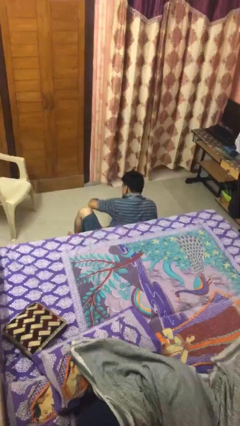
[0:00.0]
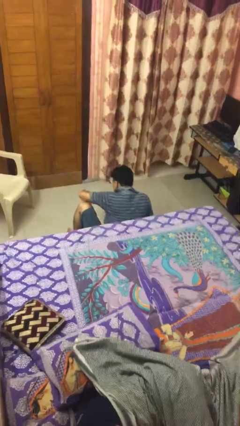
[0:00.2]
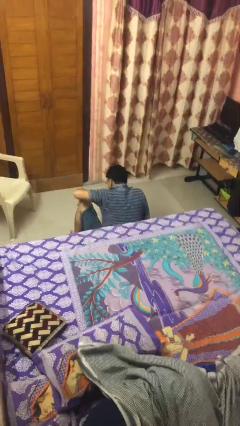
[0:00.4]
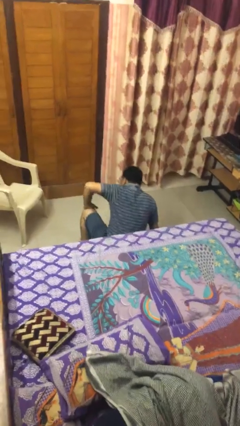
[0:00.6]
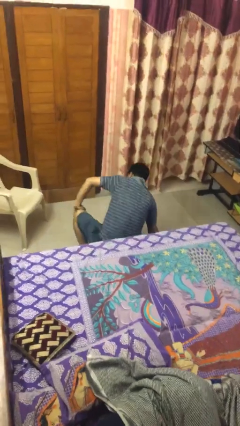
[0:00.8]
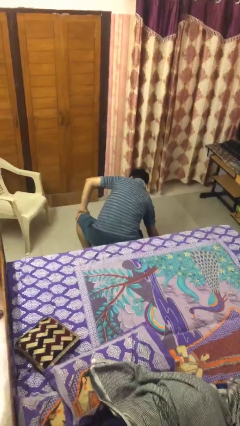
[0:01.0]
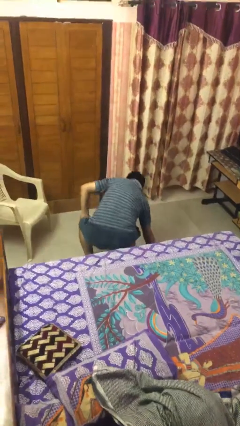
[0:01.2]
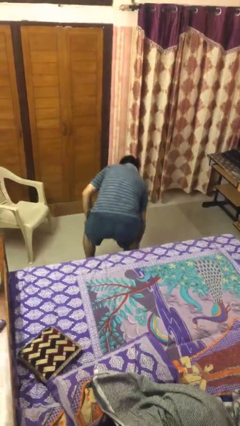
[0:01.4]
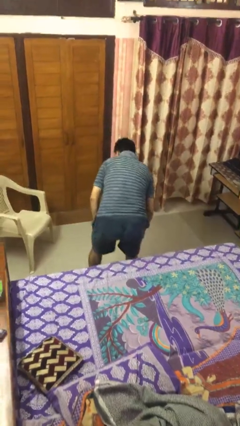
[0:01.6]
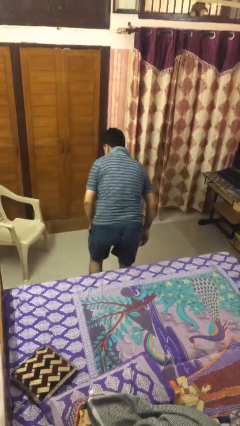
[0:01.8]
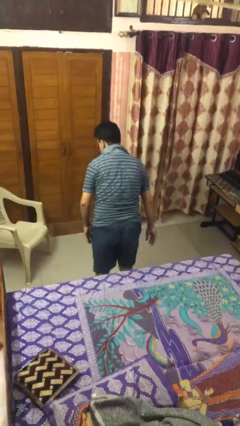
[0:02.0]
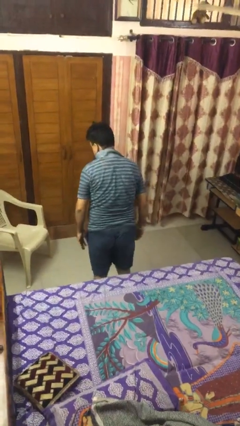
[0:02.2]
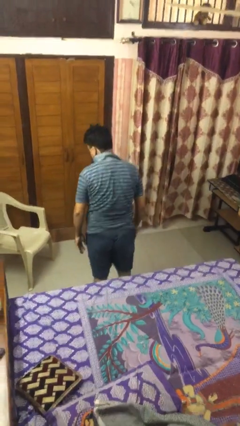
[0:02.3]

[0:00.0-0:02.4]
person stands up from floor

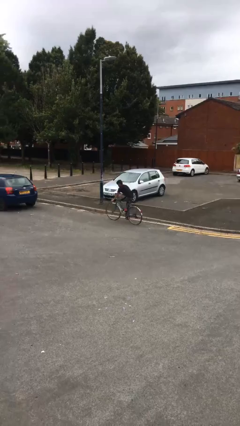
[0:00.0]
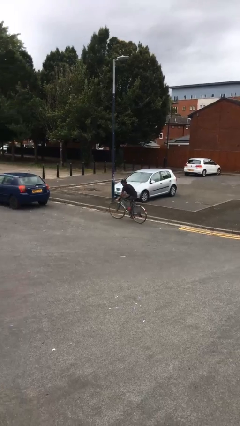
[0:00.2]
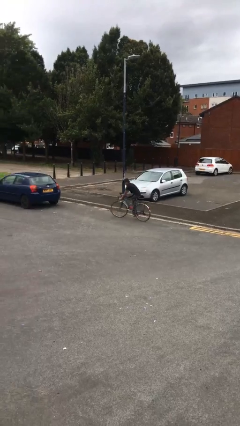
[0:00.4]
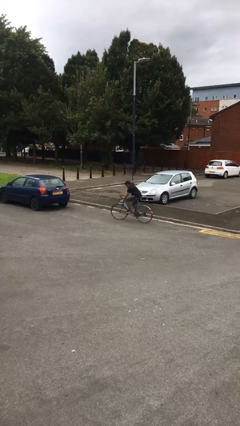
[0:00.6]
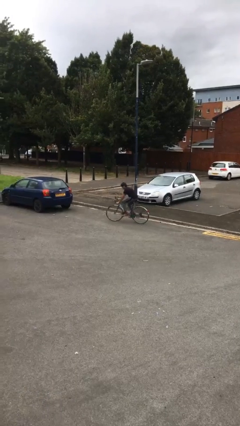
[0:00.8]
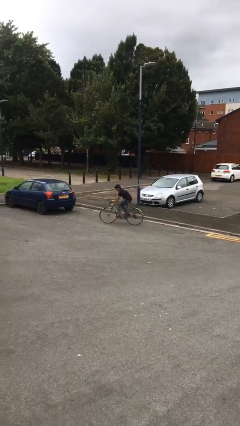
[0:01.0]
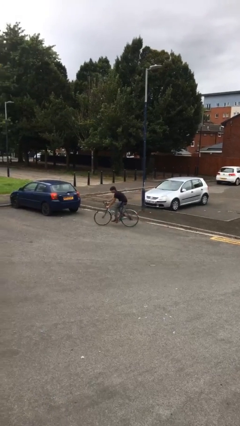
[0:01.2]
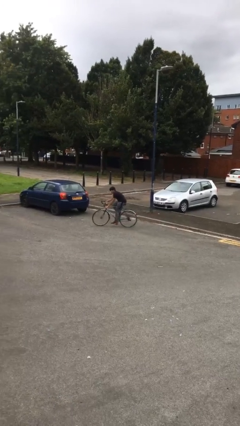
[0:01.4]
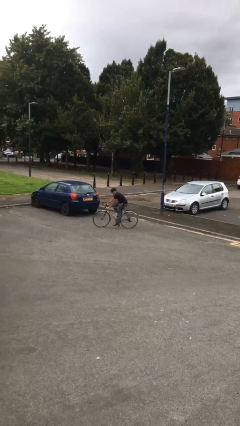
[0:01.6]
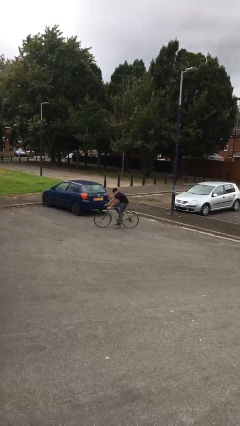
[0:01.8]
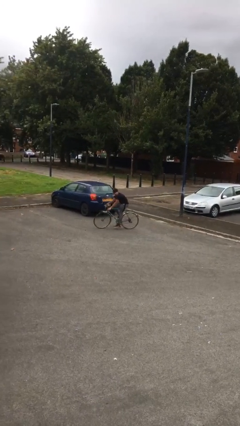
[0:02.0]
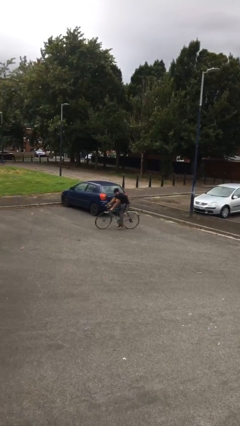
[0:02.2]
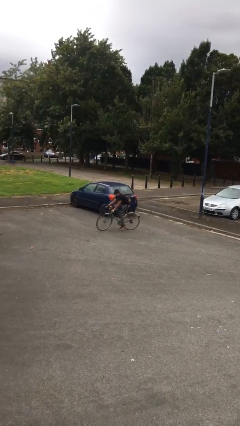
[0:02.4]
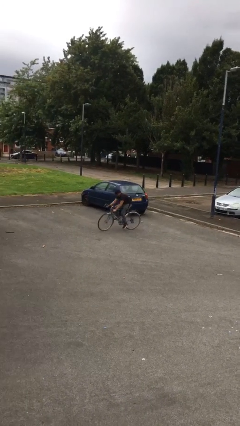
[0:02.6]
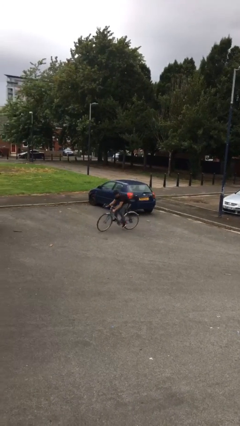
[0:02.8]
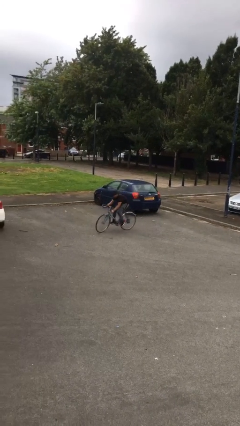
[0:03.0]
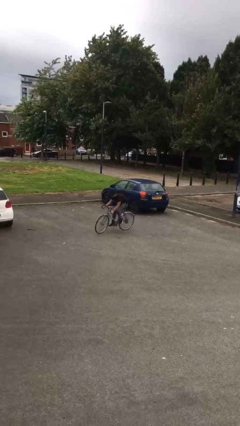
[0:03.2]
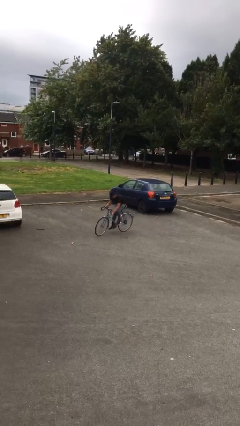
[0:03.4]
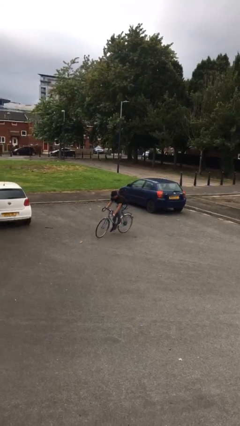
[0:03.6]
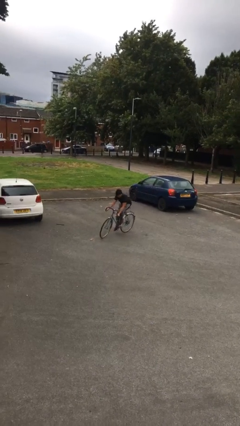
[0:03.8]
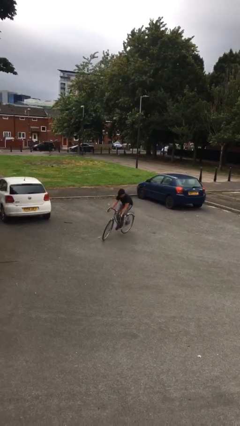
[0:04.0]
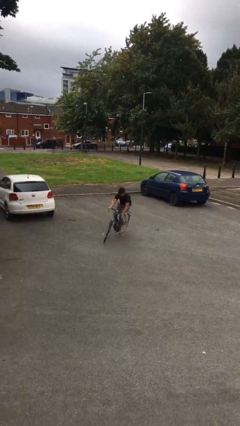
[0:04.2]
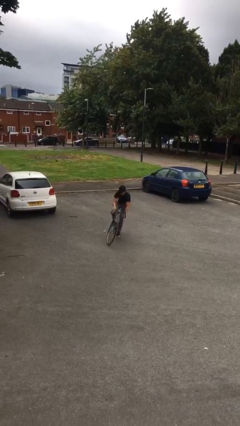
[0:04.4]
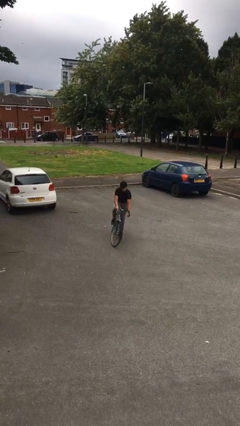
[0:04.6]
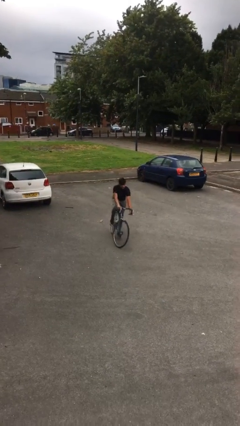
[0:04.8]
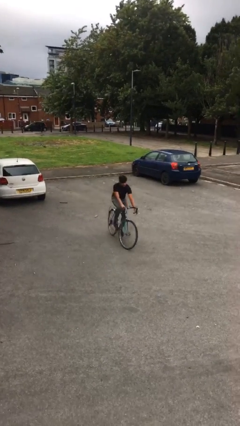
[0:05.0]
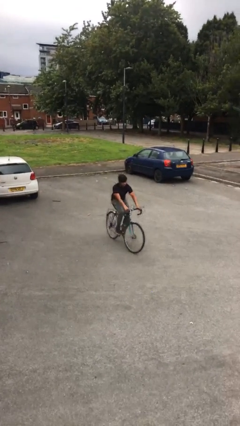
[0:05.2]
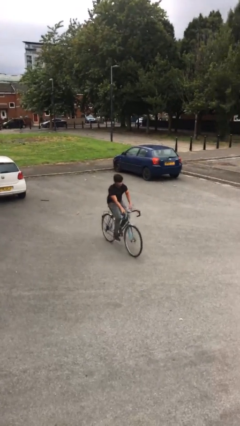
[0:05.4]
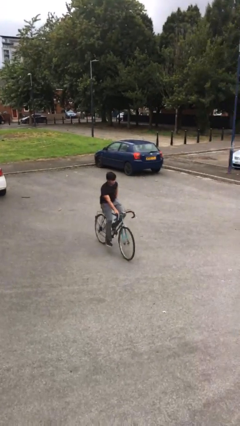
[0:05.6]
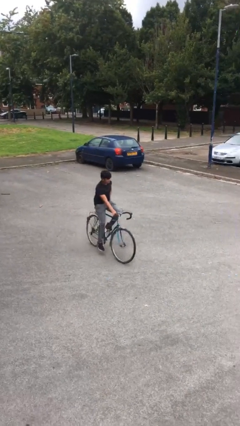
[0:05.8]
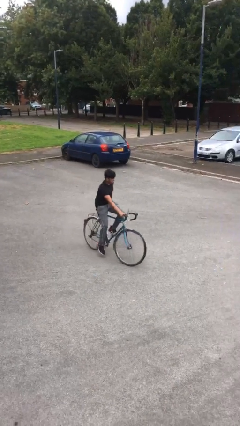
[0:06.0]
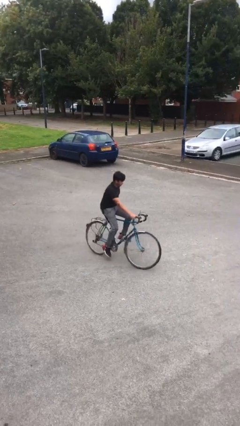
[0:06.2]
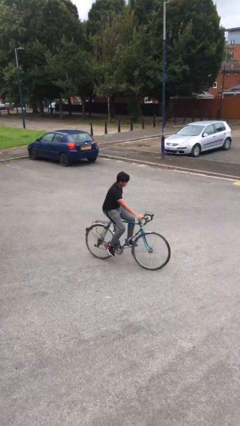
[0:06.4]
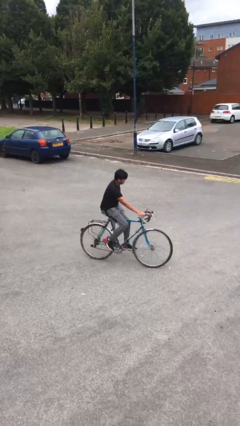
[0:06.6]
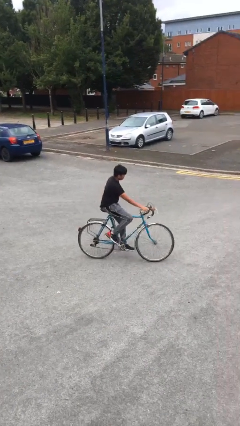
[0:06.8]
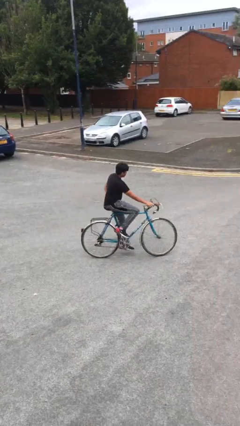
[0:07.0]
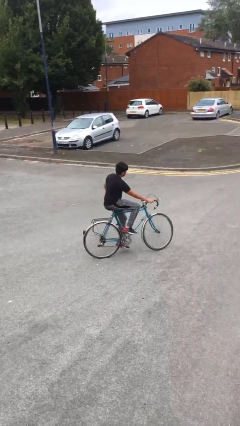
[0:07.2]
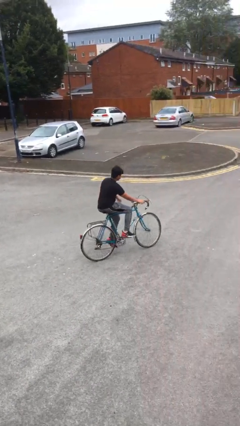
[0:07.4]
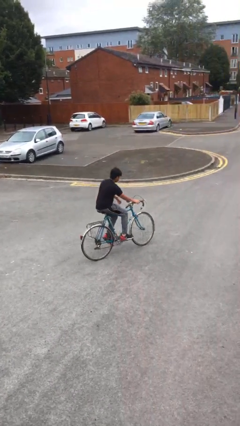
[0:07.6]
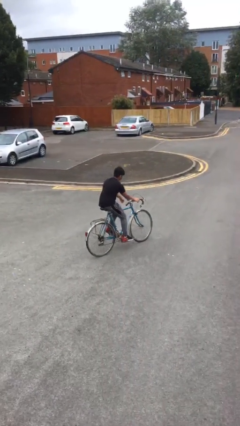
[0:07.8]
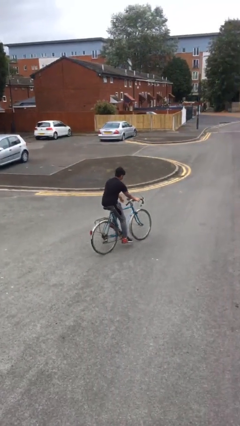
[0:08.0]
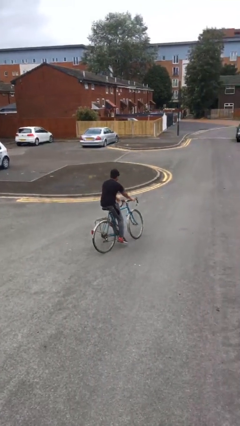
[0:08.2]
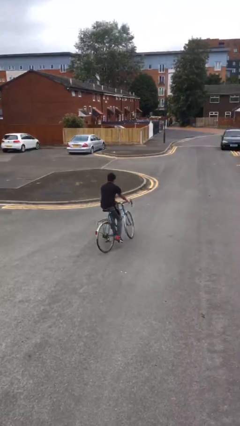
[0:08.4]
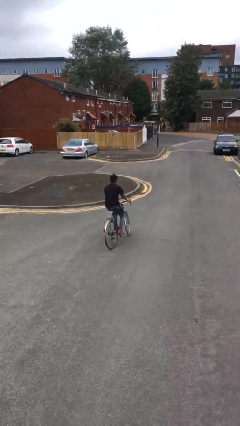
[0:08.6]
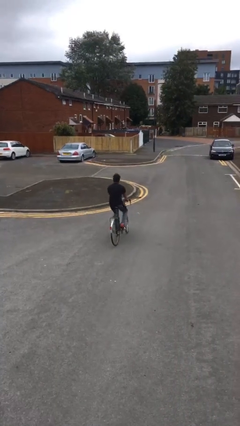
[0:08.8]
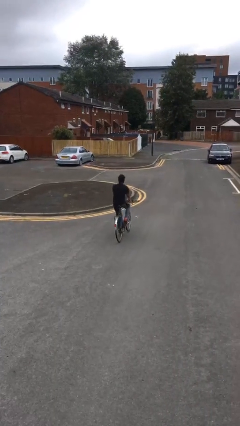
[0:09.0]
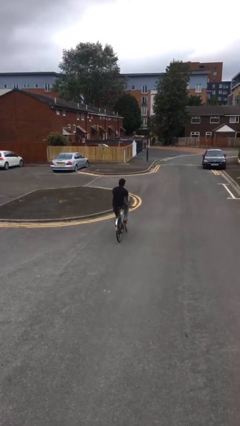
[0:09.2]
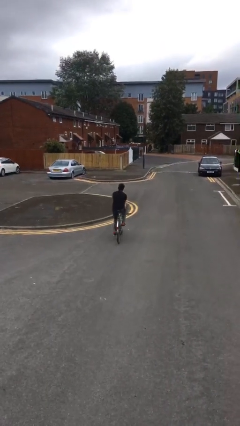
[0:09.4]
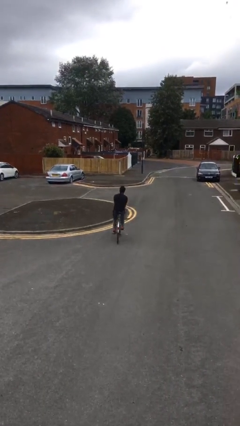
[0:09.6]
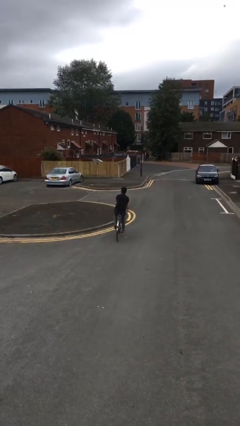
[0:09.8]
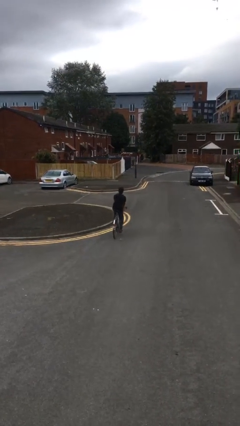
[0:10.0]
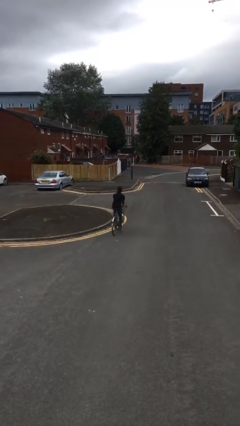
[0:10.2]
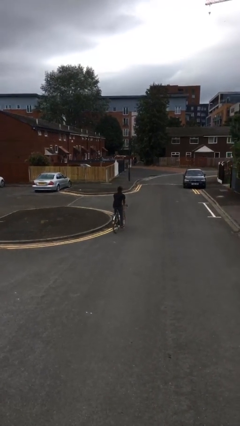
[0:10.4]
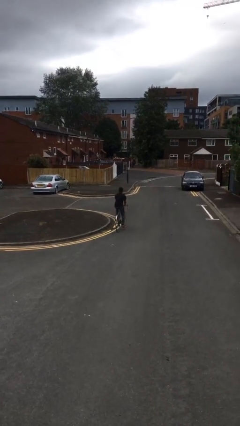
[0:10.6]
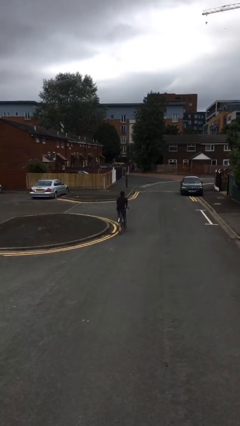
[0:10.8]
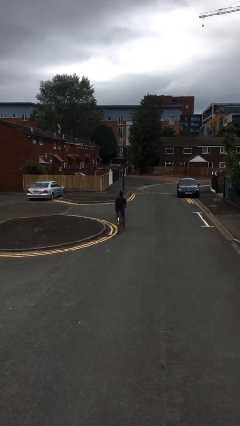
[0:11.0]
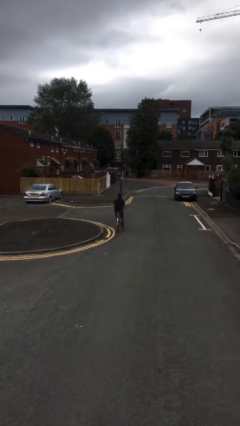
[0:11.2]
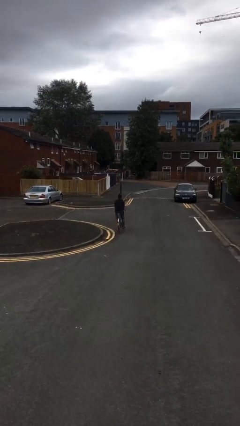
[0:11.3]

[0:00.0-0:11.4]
person rides bicycle

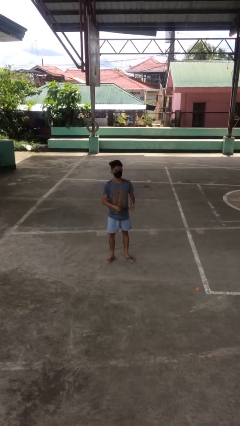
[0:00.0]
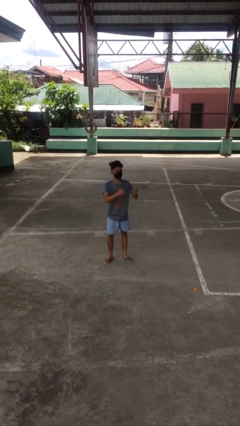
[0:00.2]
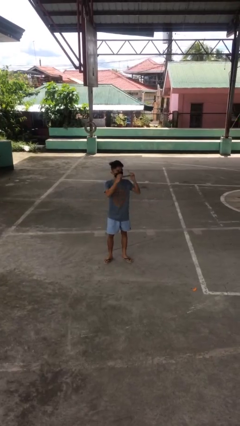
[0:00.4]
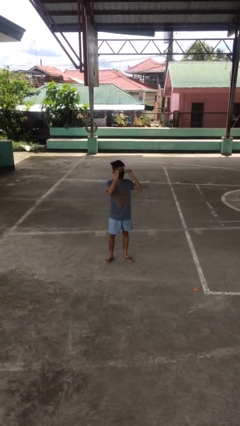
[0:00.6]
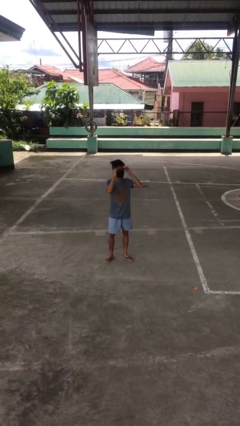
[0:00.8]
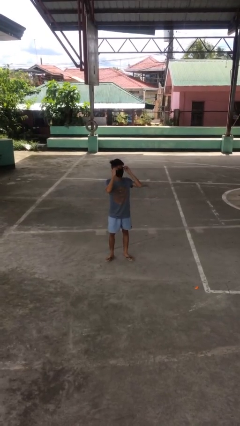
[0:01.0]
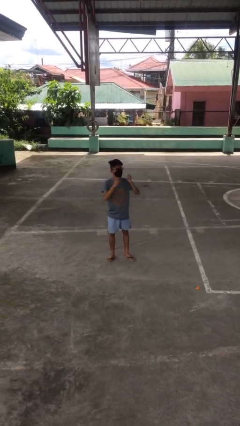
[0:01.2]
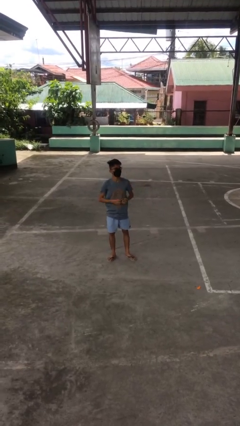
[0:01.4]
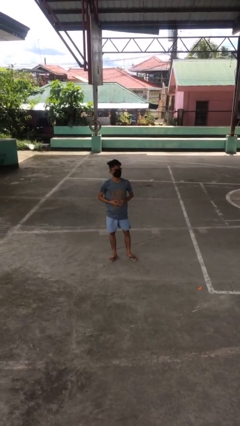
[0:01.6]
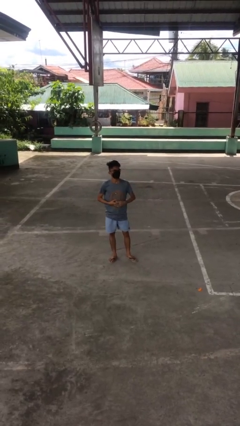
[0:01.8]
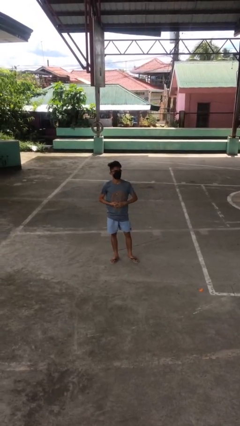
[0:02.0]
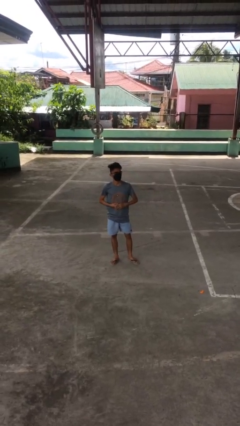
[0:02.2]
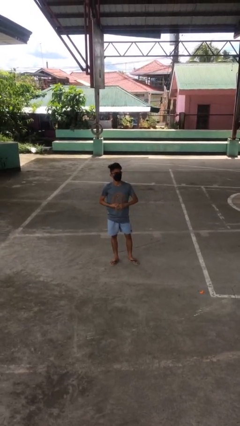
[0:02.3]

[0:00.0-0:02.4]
person puts on glasses

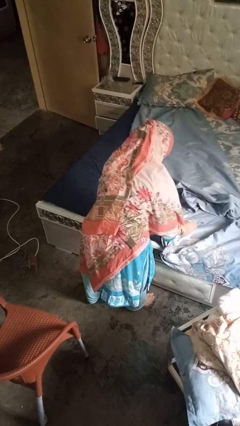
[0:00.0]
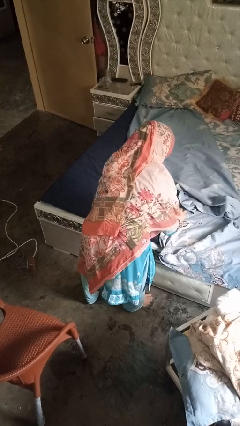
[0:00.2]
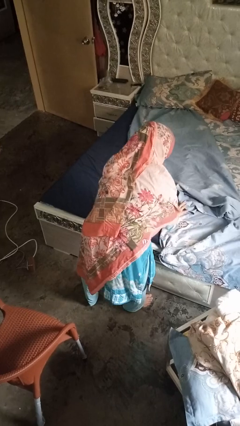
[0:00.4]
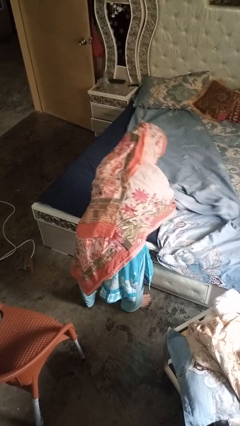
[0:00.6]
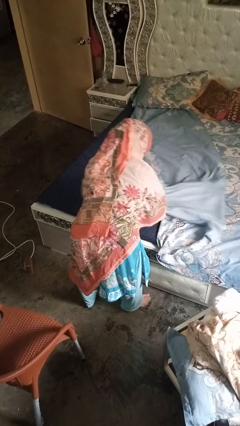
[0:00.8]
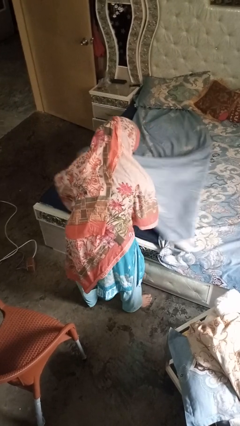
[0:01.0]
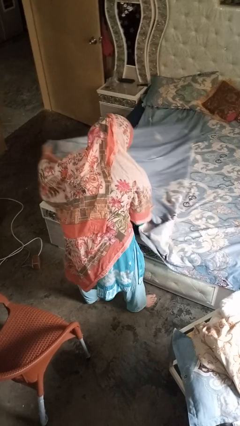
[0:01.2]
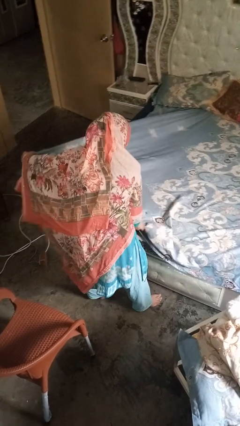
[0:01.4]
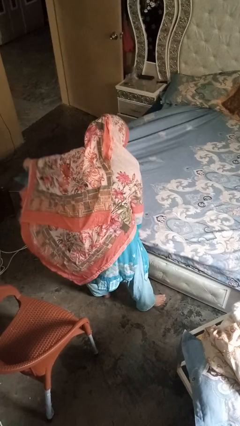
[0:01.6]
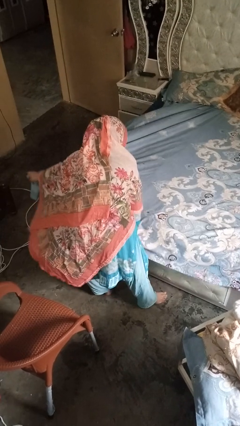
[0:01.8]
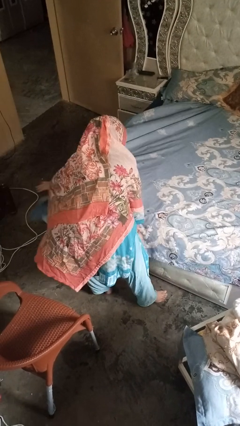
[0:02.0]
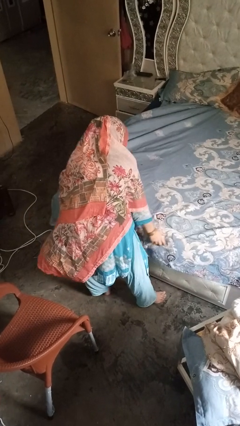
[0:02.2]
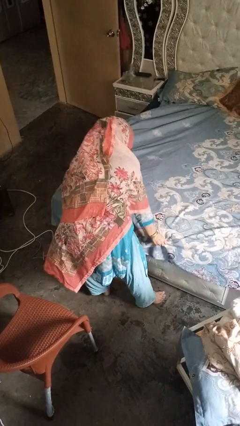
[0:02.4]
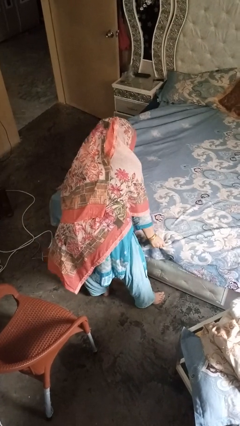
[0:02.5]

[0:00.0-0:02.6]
person makes bed
